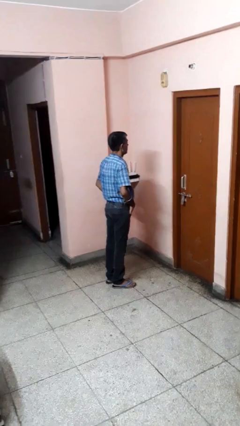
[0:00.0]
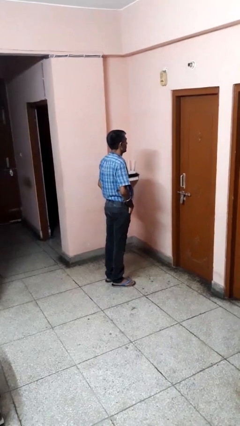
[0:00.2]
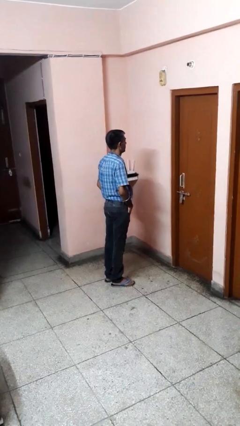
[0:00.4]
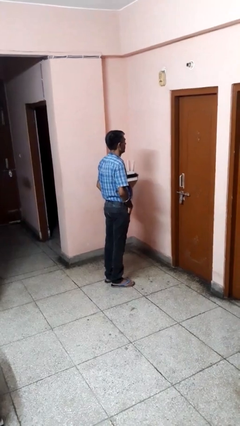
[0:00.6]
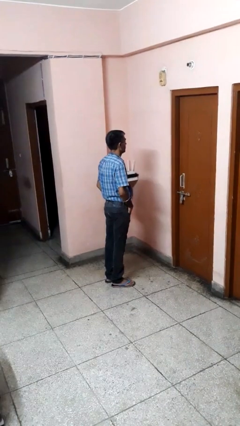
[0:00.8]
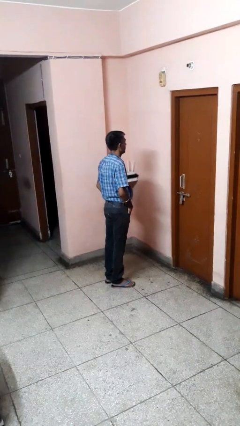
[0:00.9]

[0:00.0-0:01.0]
person puts hands in back pockets

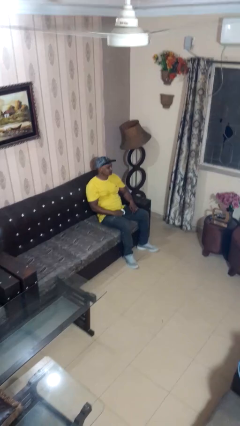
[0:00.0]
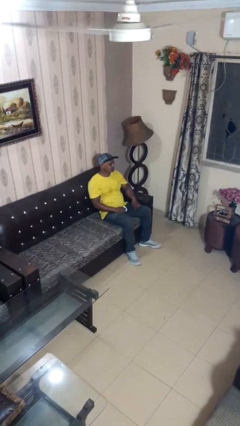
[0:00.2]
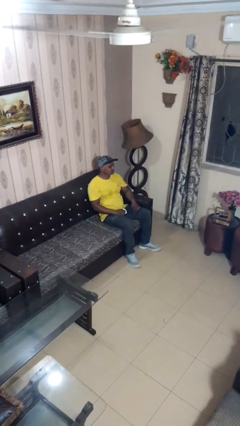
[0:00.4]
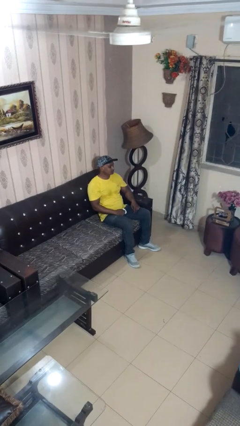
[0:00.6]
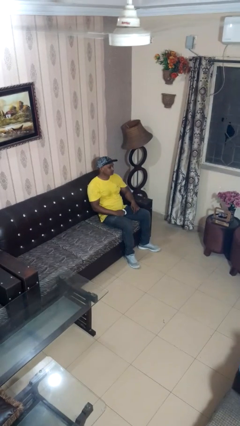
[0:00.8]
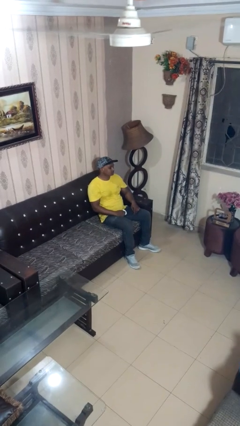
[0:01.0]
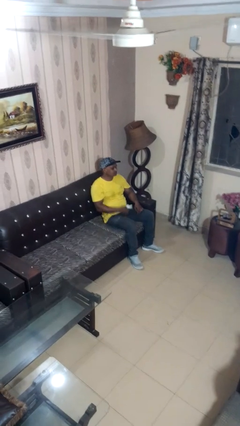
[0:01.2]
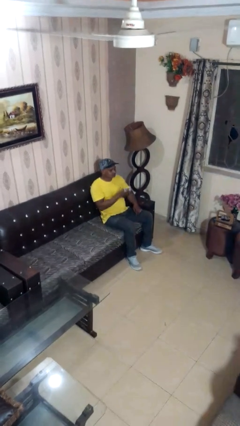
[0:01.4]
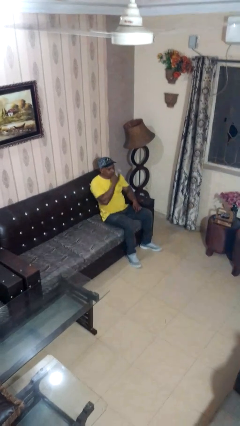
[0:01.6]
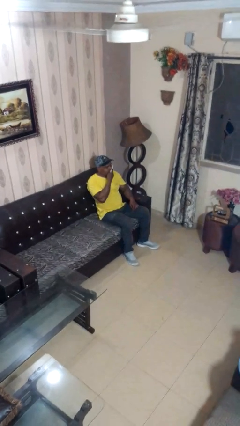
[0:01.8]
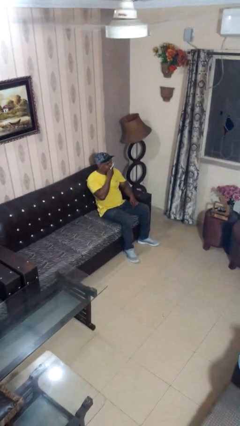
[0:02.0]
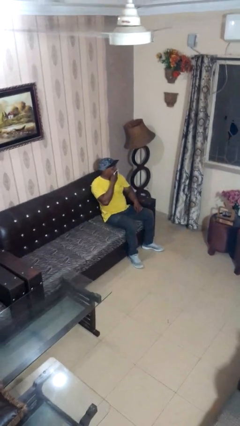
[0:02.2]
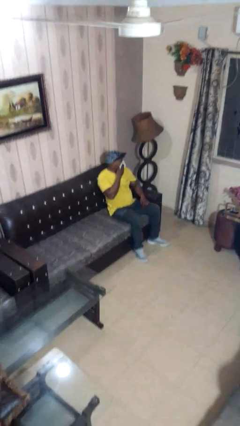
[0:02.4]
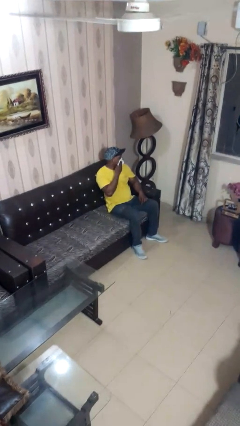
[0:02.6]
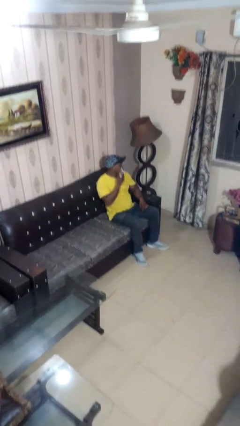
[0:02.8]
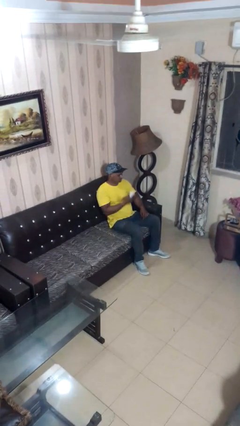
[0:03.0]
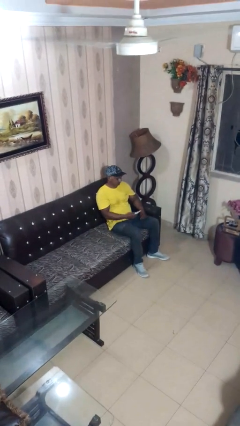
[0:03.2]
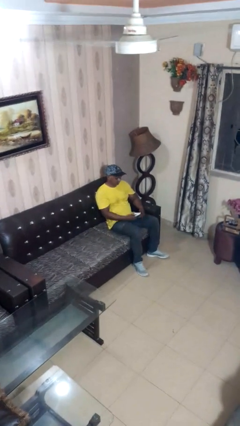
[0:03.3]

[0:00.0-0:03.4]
person wipes mouth with napkin

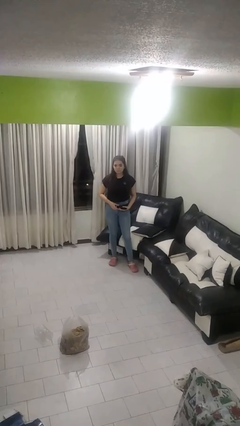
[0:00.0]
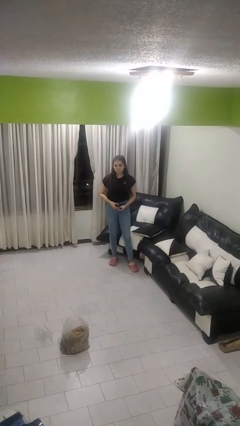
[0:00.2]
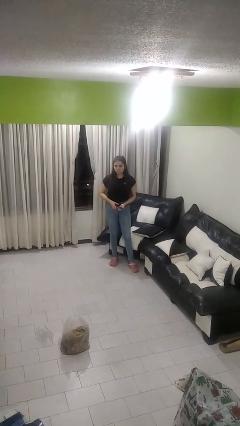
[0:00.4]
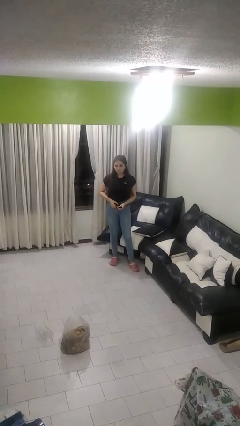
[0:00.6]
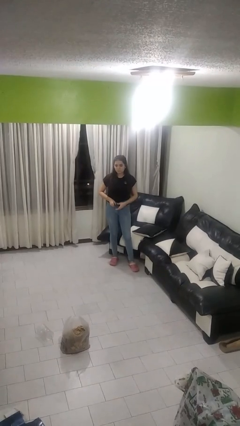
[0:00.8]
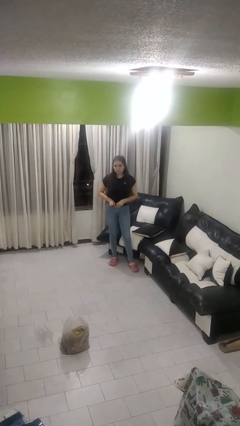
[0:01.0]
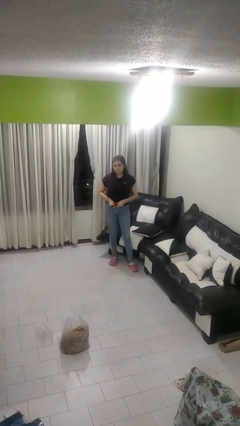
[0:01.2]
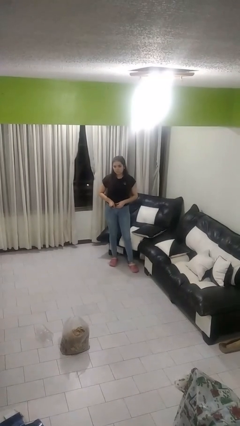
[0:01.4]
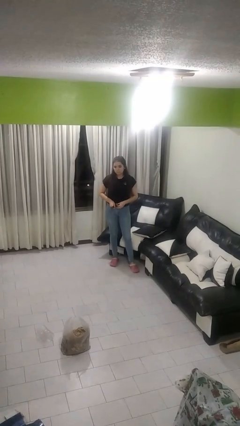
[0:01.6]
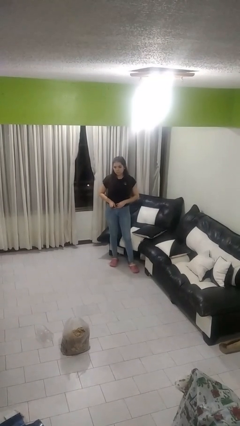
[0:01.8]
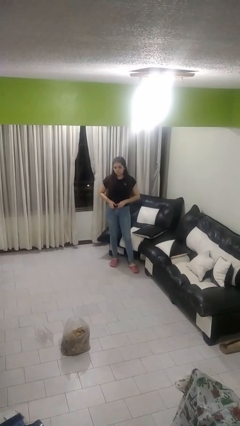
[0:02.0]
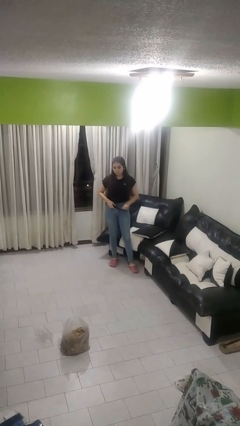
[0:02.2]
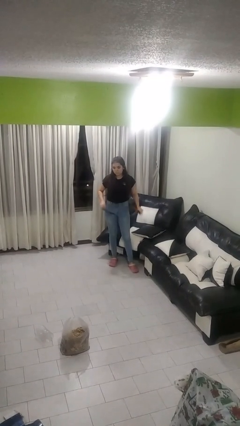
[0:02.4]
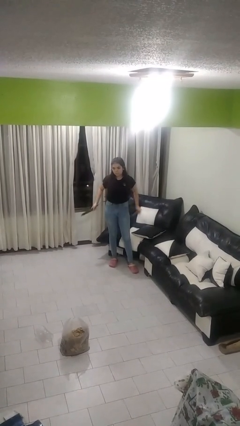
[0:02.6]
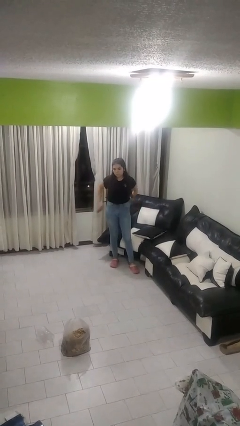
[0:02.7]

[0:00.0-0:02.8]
person takes off belt

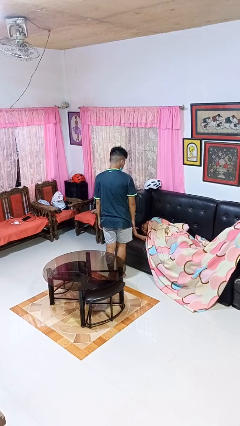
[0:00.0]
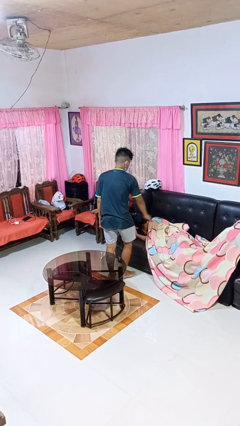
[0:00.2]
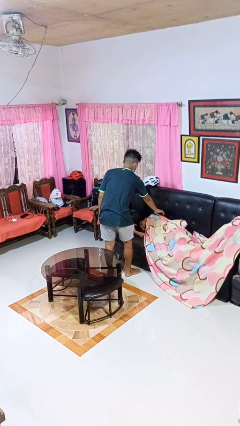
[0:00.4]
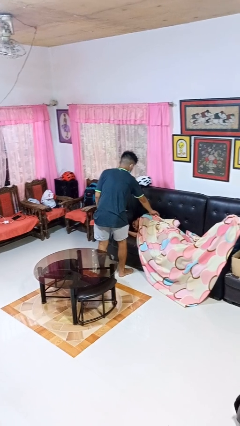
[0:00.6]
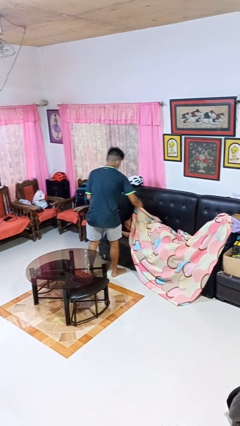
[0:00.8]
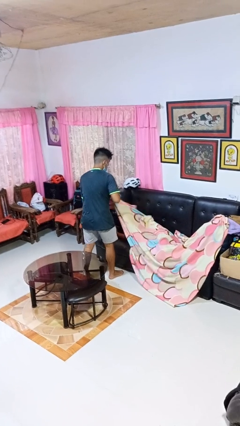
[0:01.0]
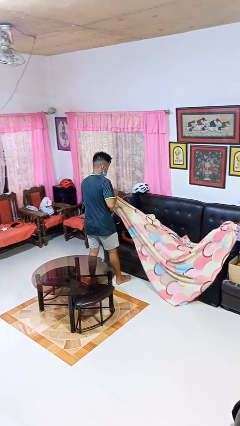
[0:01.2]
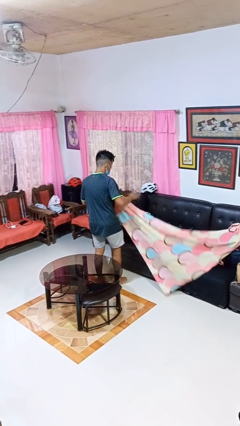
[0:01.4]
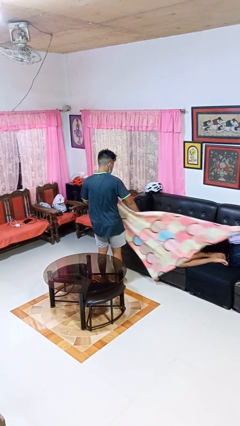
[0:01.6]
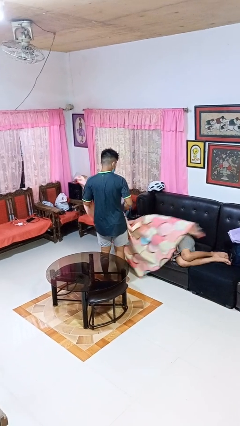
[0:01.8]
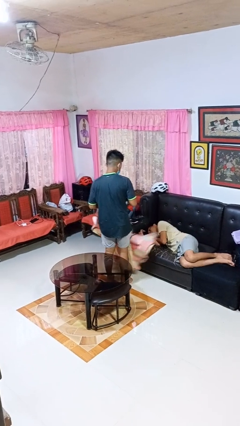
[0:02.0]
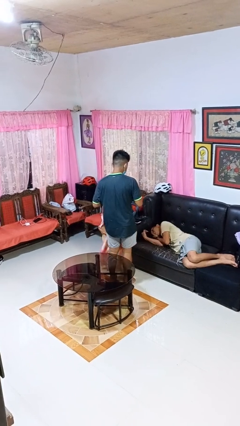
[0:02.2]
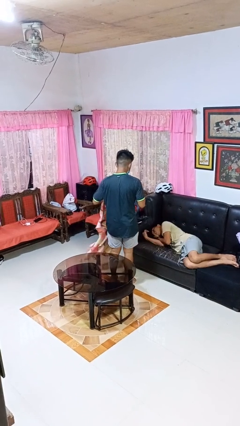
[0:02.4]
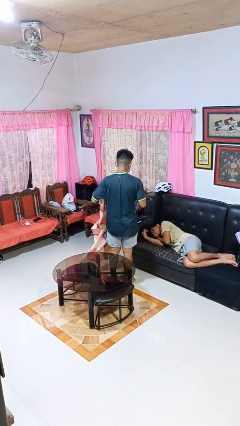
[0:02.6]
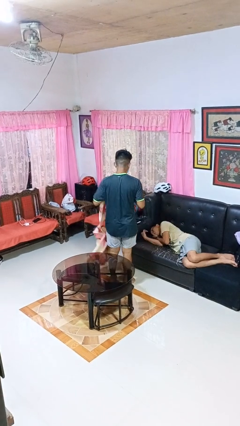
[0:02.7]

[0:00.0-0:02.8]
person uncovers friend with blanket

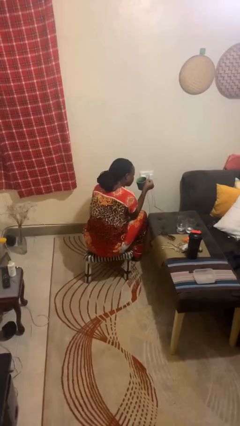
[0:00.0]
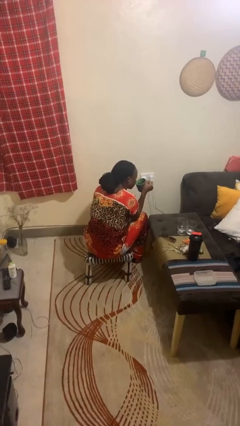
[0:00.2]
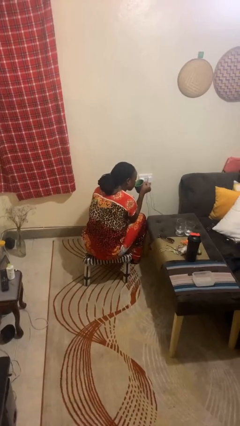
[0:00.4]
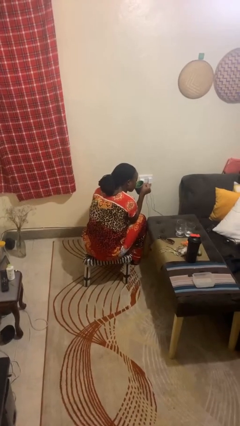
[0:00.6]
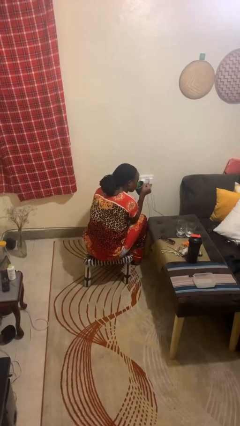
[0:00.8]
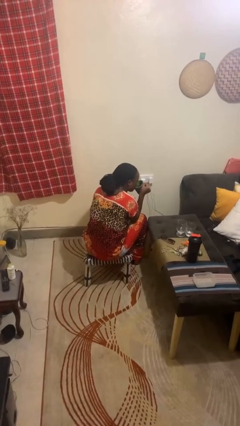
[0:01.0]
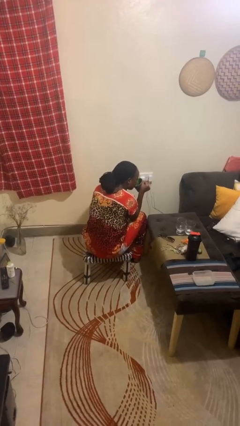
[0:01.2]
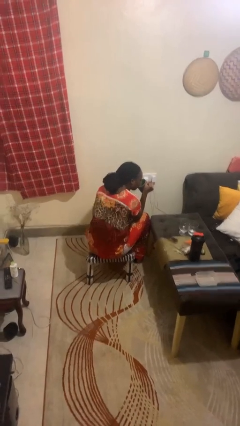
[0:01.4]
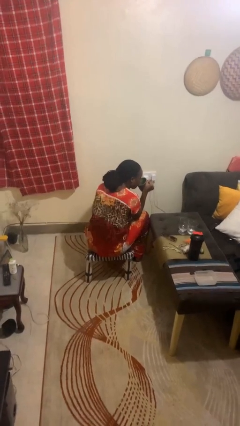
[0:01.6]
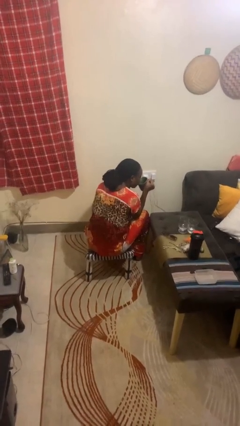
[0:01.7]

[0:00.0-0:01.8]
person drinks from mug

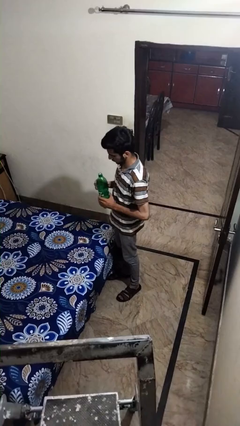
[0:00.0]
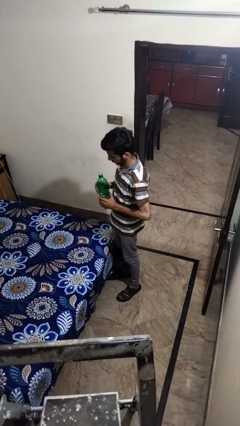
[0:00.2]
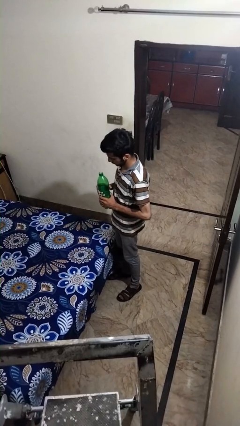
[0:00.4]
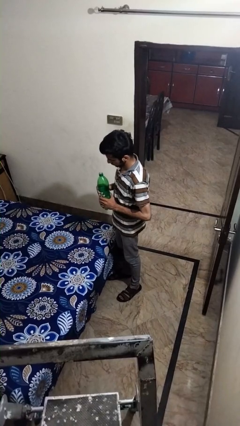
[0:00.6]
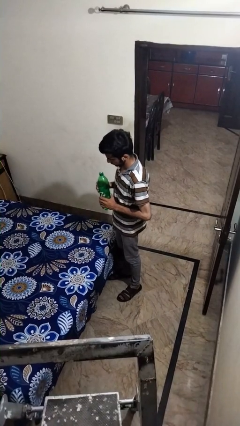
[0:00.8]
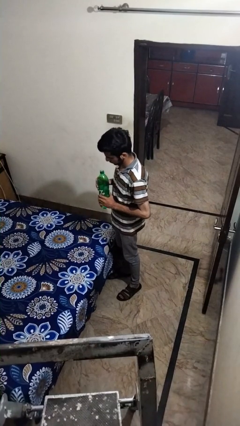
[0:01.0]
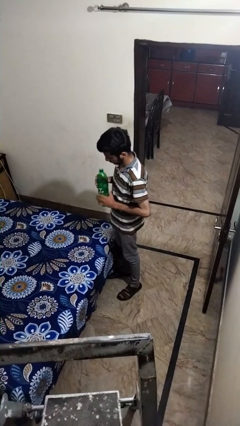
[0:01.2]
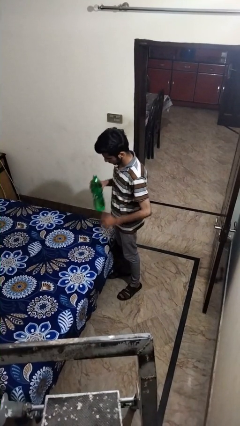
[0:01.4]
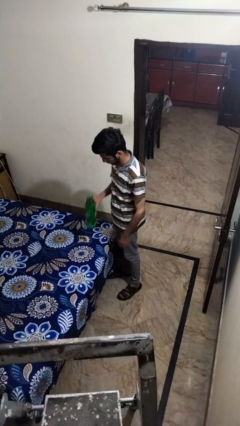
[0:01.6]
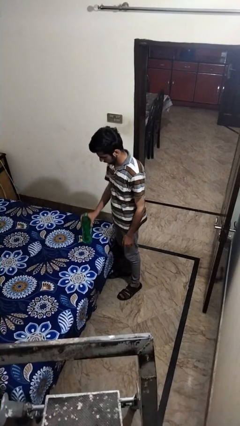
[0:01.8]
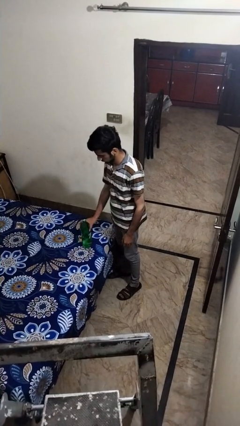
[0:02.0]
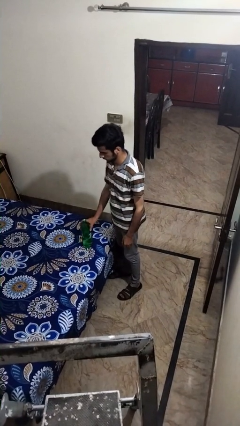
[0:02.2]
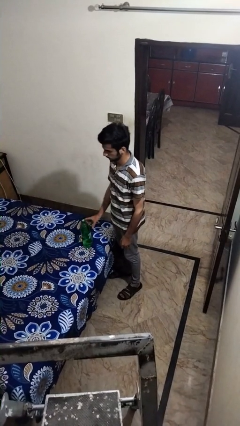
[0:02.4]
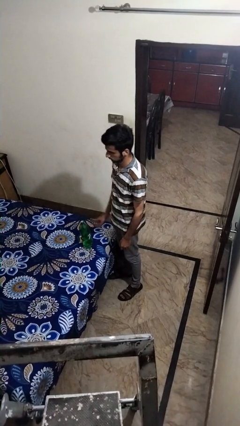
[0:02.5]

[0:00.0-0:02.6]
person puts down object on bed

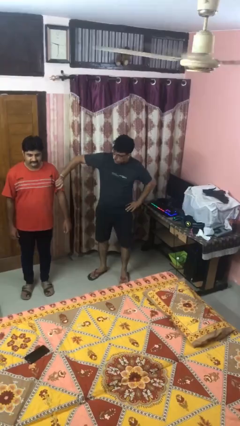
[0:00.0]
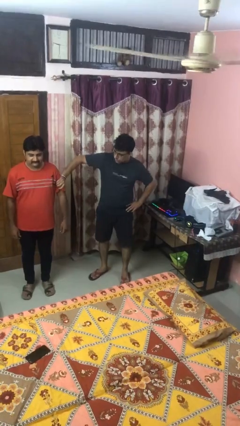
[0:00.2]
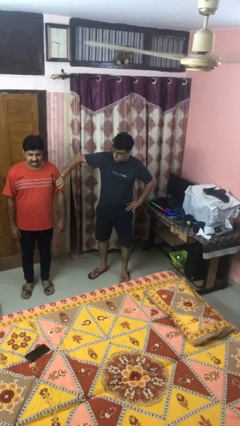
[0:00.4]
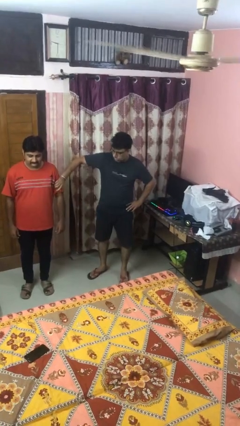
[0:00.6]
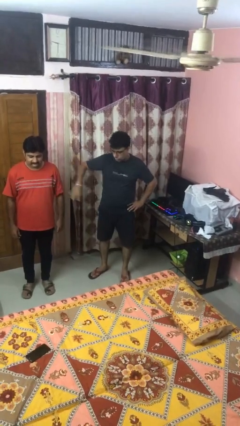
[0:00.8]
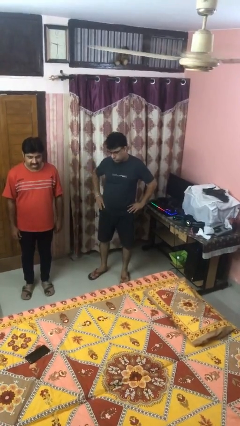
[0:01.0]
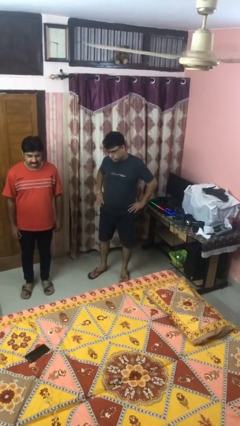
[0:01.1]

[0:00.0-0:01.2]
person grabs person by bicep

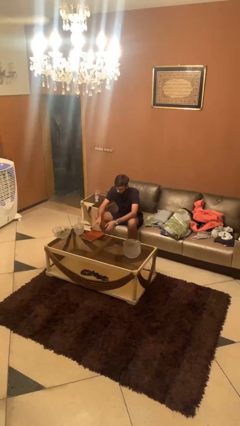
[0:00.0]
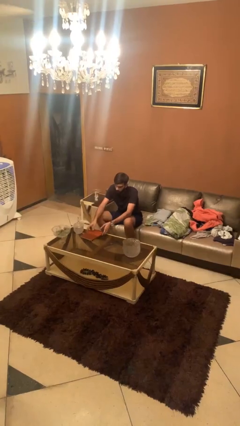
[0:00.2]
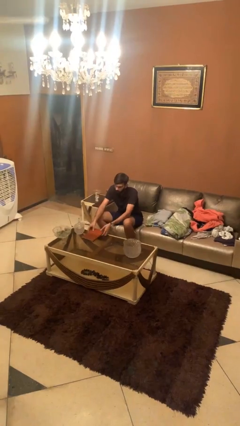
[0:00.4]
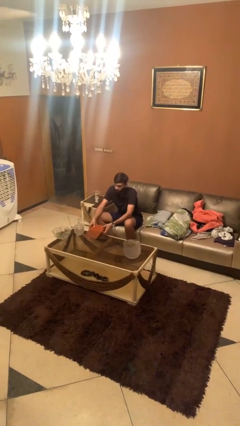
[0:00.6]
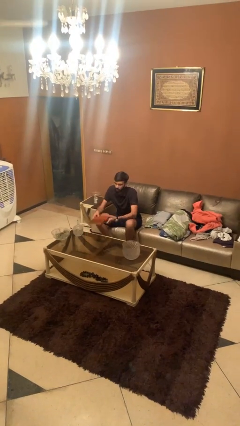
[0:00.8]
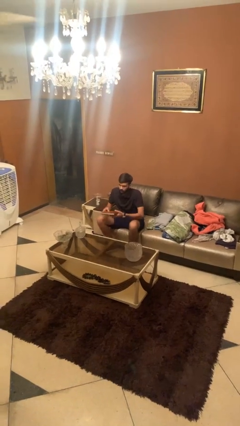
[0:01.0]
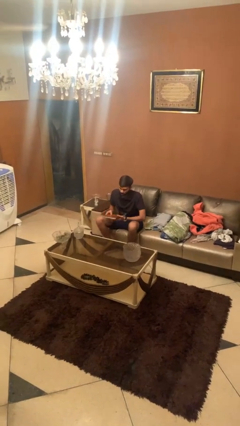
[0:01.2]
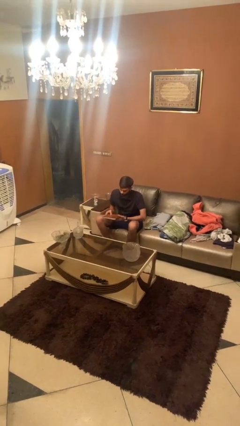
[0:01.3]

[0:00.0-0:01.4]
person picks up object from table
